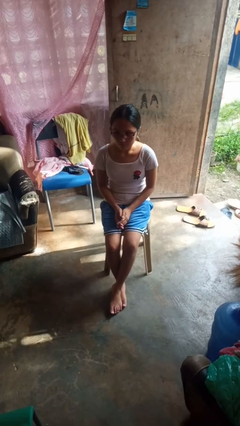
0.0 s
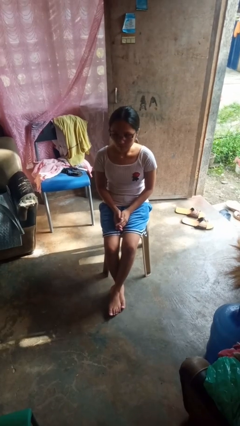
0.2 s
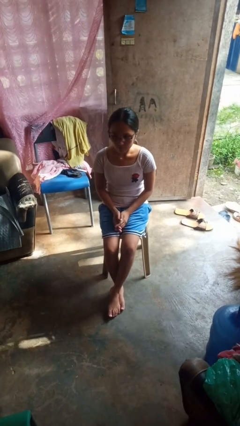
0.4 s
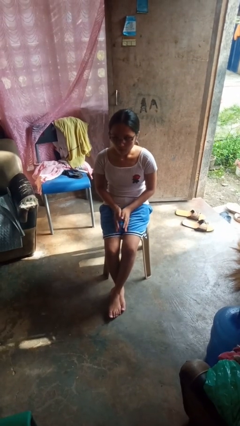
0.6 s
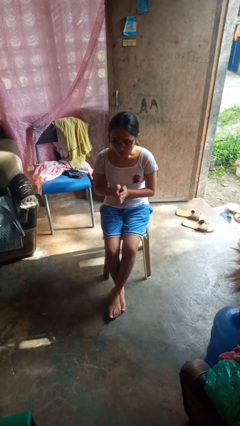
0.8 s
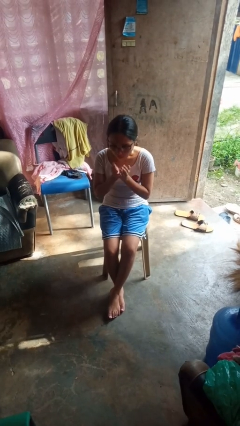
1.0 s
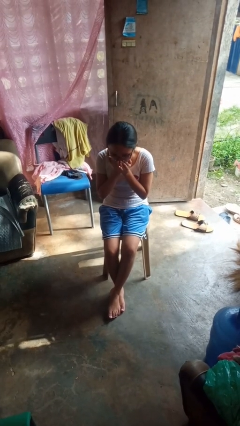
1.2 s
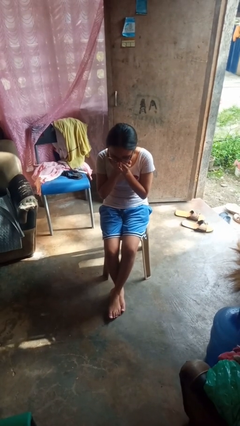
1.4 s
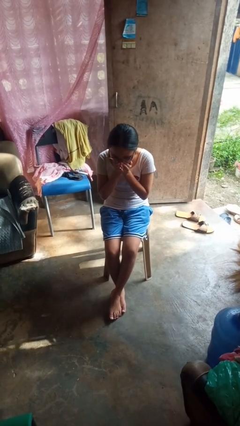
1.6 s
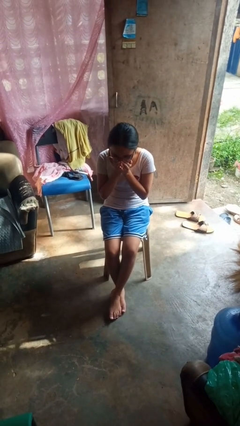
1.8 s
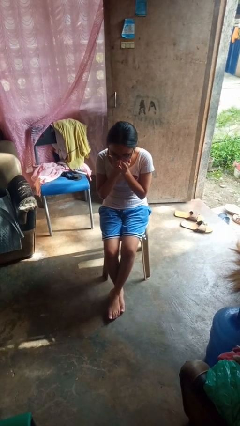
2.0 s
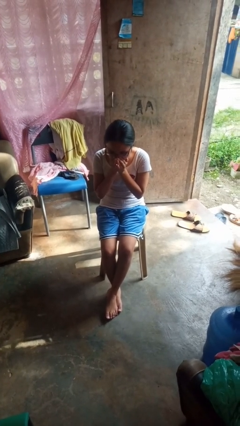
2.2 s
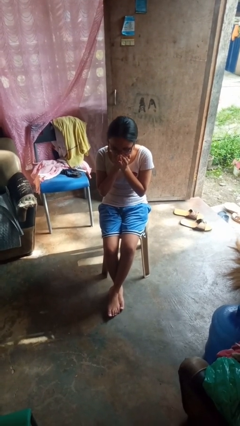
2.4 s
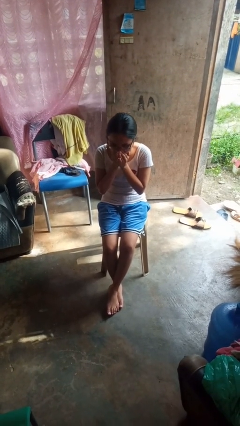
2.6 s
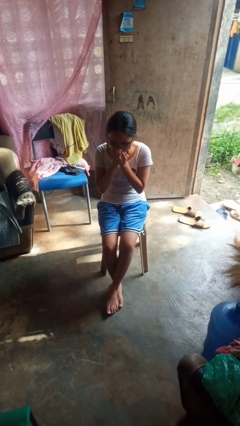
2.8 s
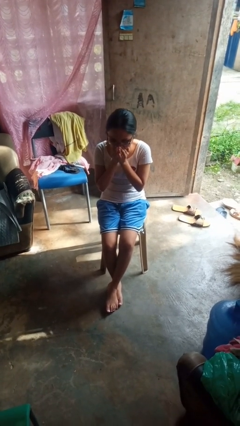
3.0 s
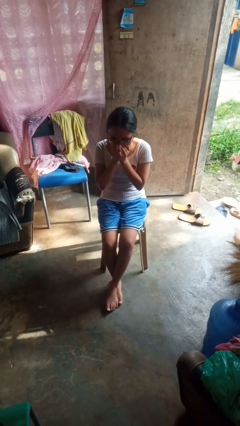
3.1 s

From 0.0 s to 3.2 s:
person sneezes into hand

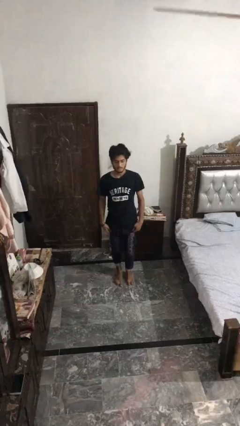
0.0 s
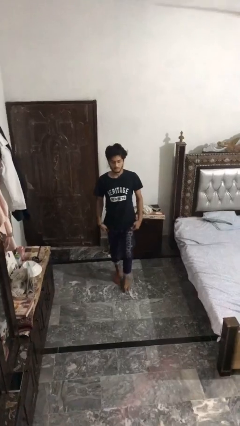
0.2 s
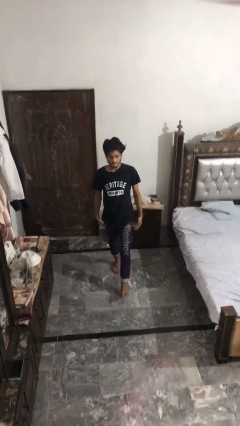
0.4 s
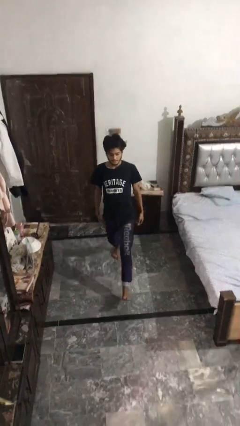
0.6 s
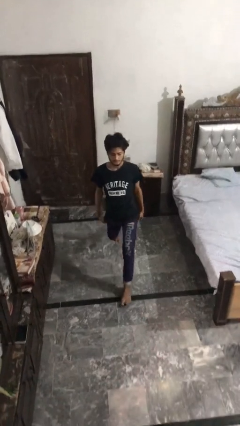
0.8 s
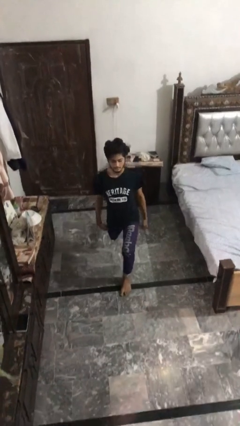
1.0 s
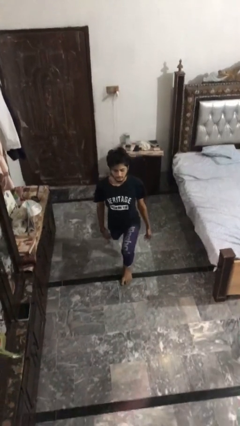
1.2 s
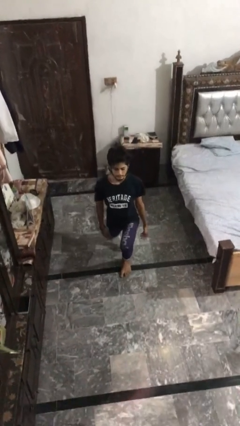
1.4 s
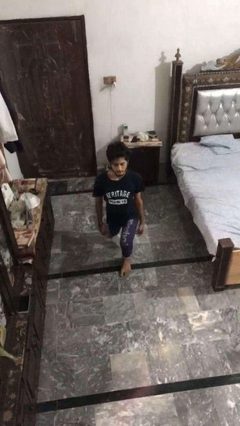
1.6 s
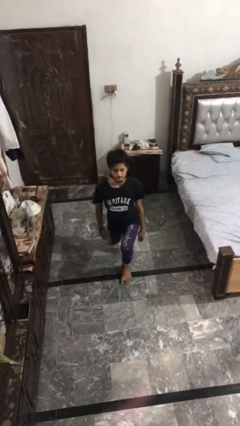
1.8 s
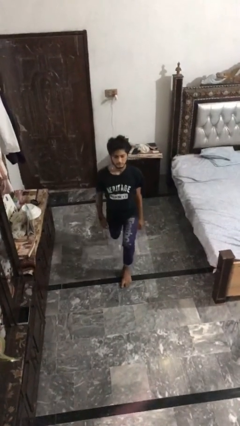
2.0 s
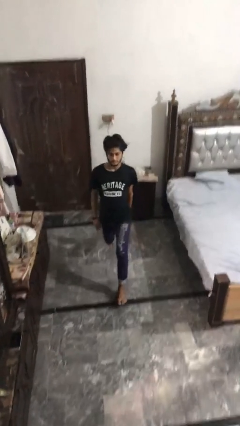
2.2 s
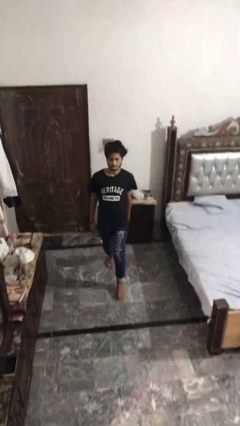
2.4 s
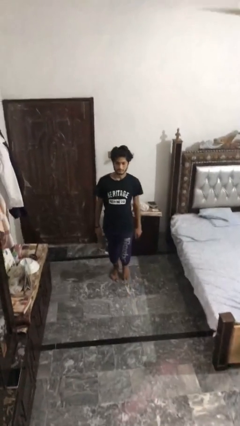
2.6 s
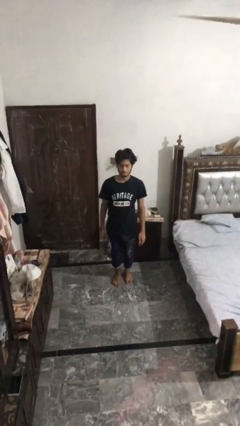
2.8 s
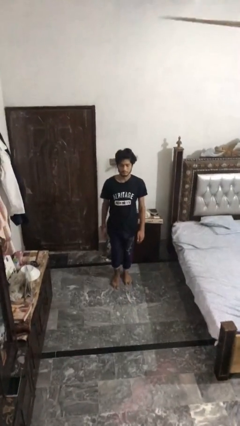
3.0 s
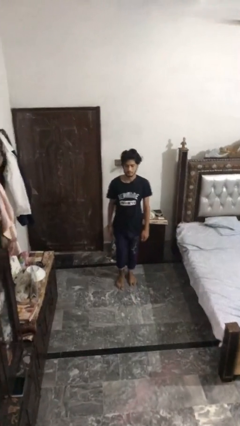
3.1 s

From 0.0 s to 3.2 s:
person exercises with lunges

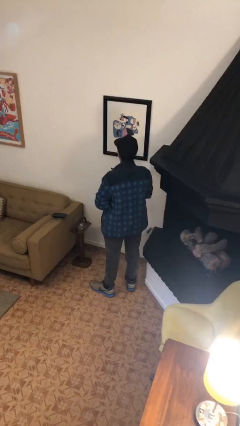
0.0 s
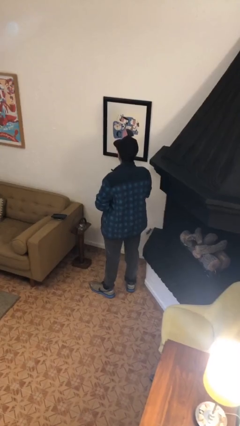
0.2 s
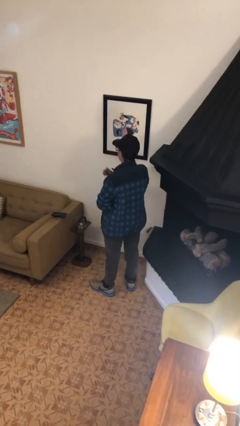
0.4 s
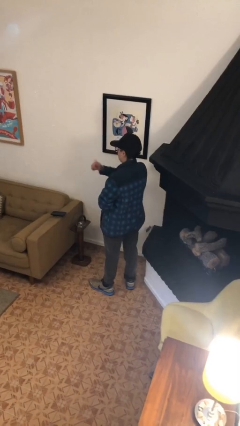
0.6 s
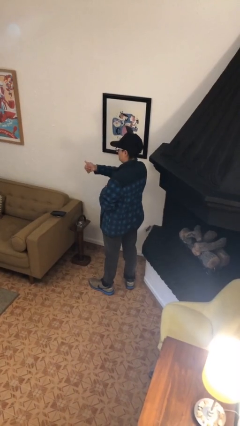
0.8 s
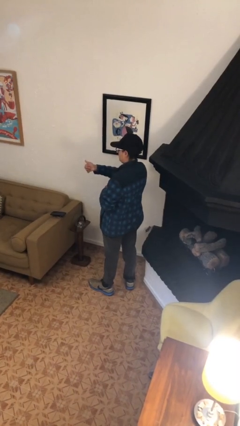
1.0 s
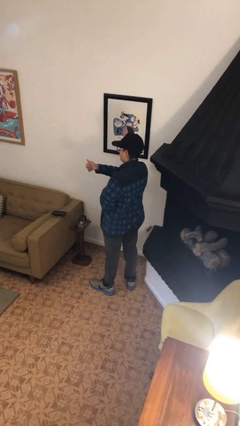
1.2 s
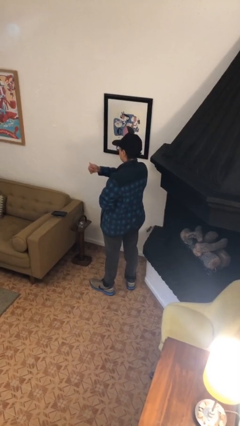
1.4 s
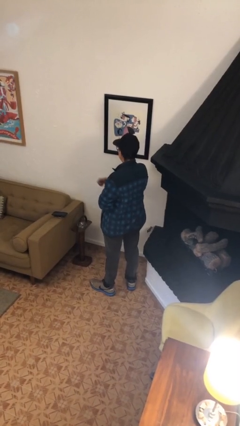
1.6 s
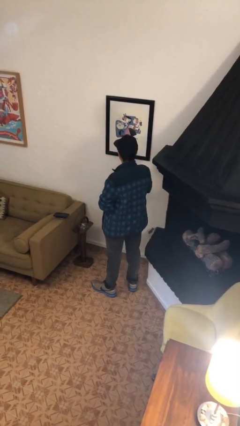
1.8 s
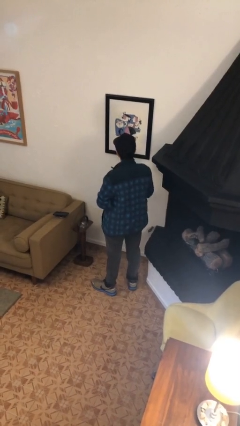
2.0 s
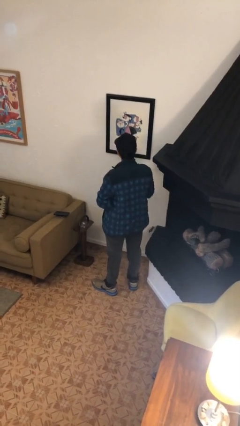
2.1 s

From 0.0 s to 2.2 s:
person gestures thumbs up

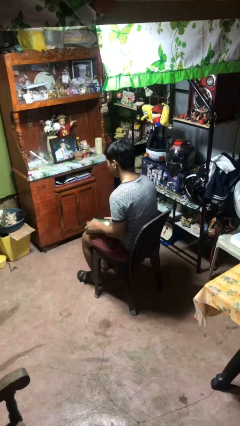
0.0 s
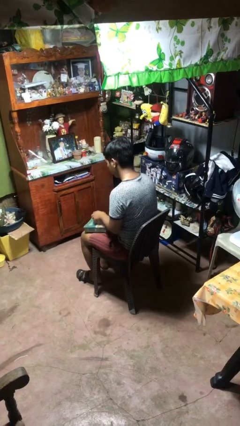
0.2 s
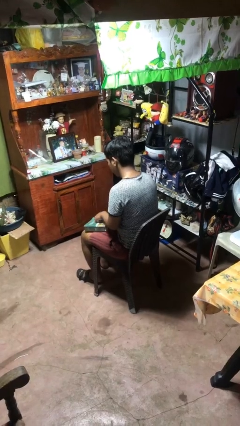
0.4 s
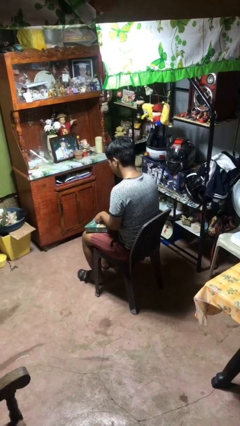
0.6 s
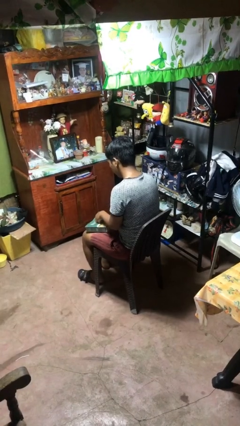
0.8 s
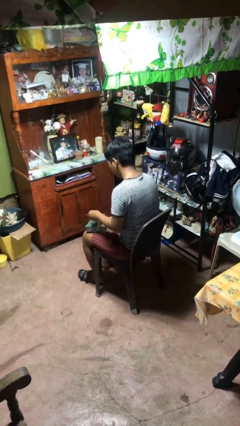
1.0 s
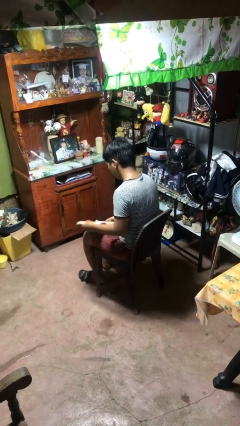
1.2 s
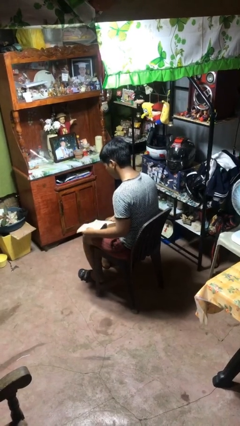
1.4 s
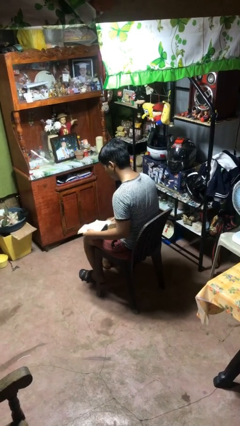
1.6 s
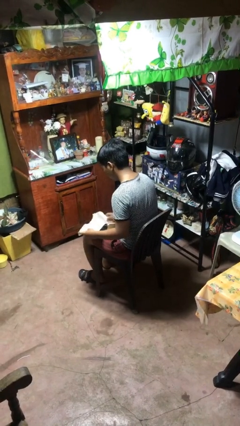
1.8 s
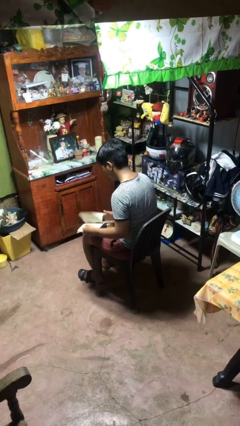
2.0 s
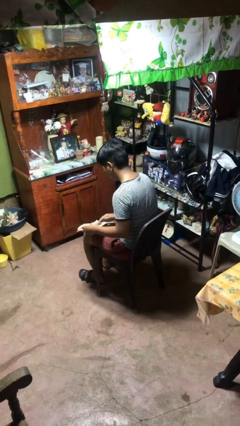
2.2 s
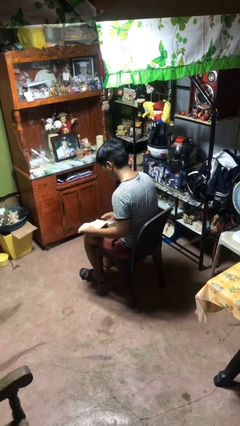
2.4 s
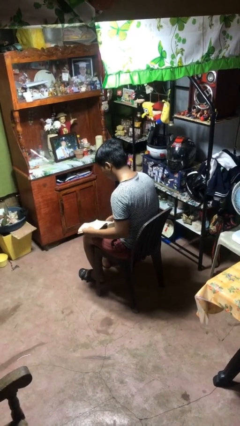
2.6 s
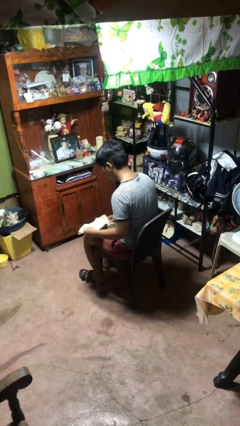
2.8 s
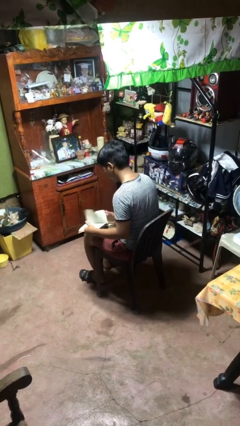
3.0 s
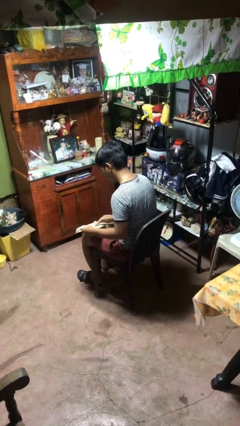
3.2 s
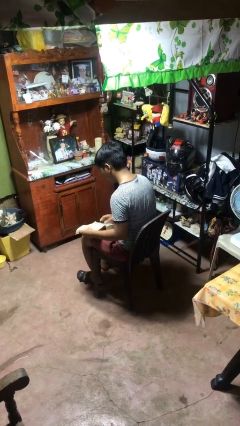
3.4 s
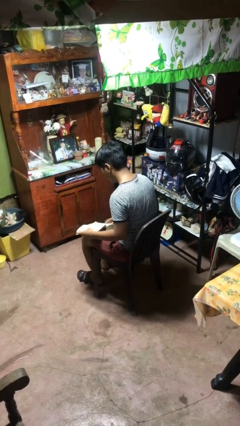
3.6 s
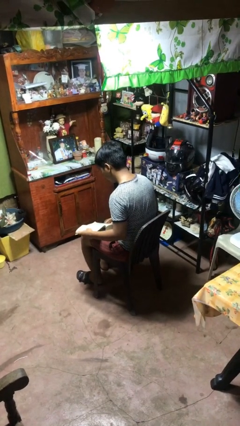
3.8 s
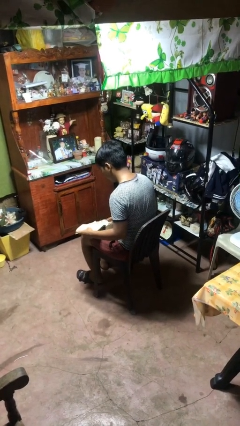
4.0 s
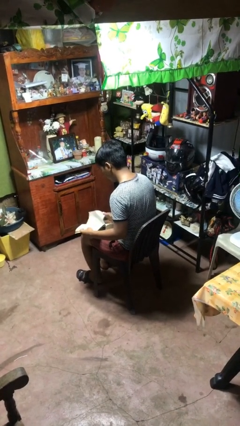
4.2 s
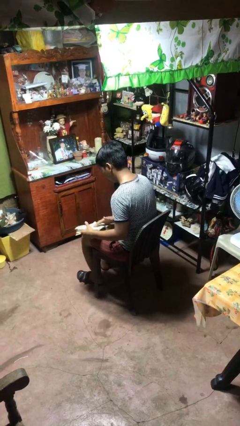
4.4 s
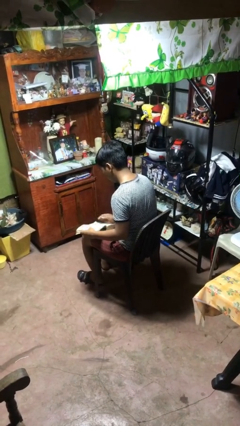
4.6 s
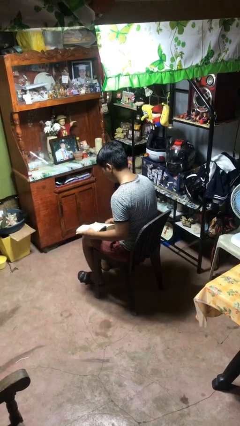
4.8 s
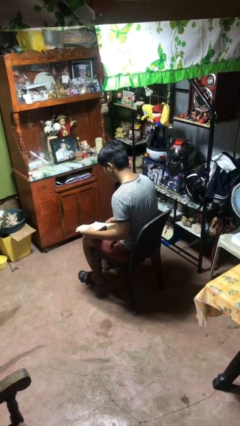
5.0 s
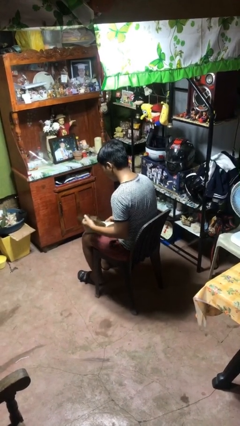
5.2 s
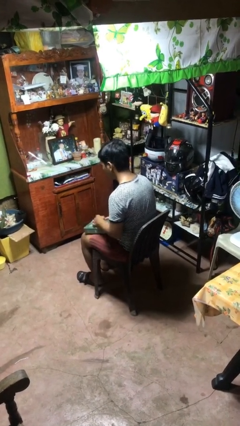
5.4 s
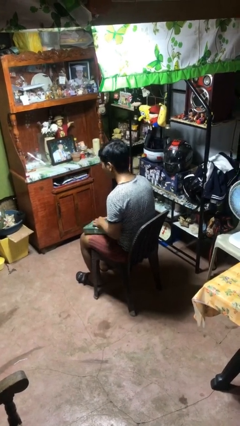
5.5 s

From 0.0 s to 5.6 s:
person reads book

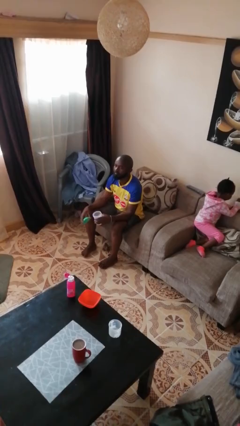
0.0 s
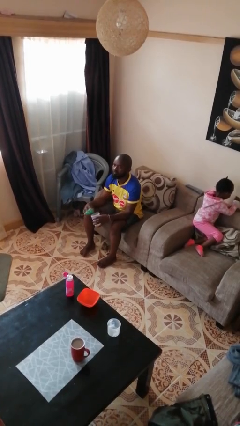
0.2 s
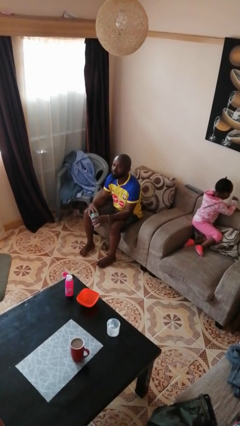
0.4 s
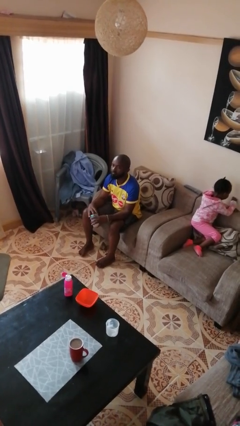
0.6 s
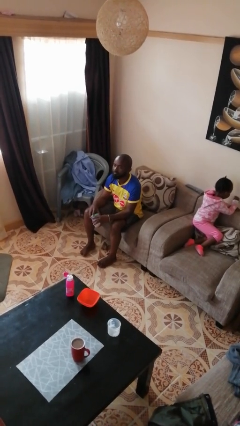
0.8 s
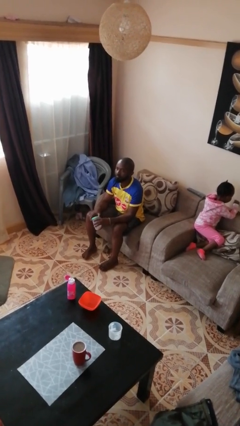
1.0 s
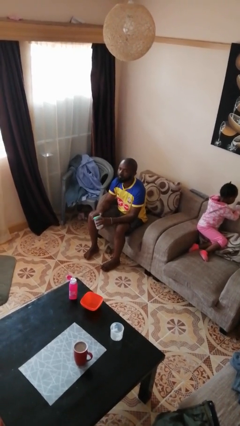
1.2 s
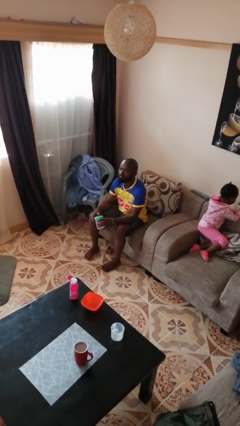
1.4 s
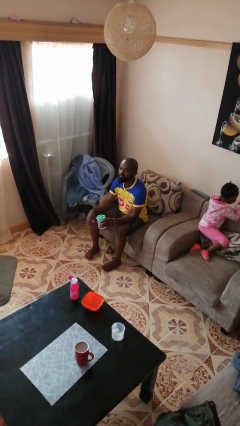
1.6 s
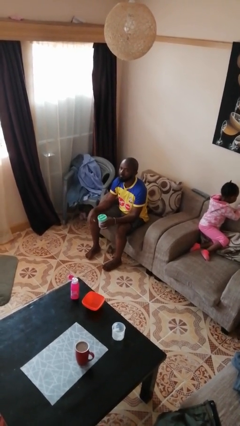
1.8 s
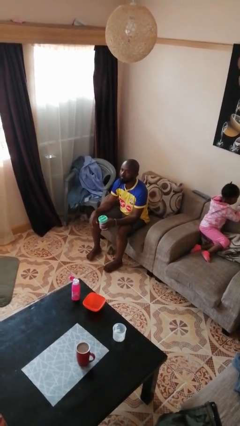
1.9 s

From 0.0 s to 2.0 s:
person closes jar

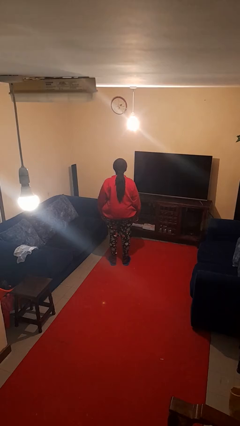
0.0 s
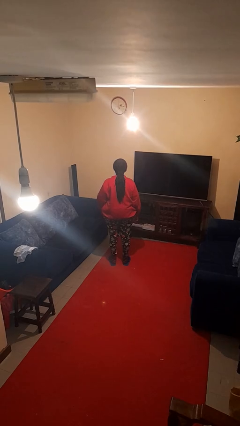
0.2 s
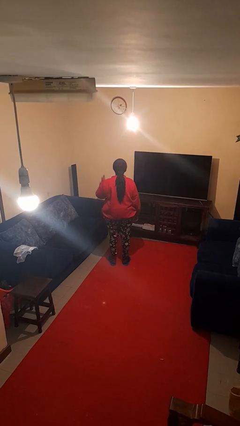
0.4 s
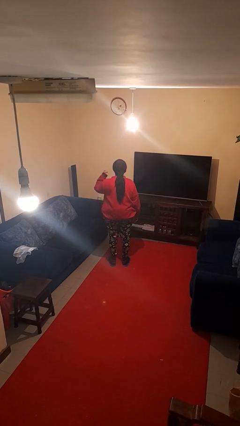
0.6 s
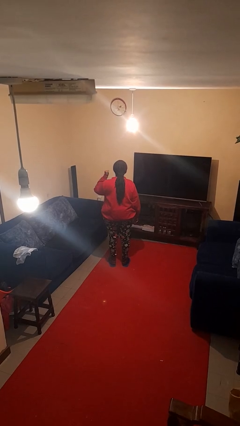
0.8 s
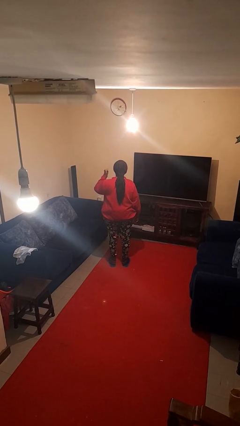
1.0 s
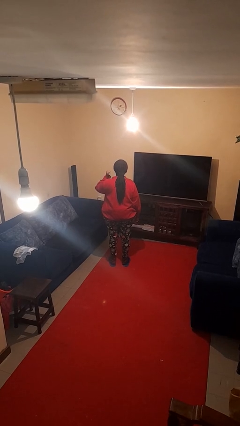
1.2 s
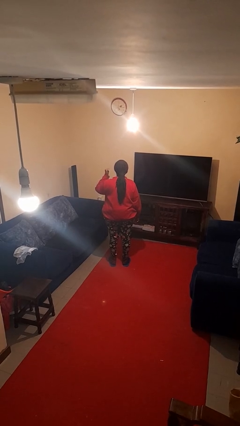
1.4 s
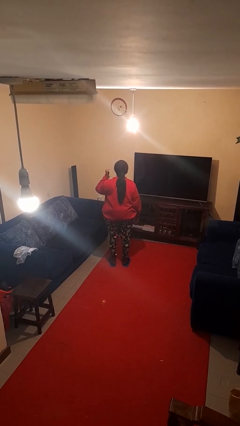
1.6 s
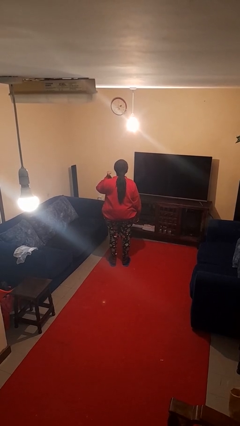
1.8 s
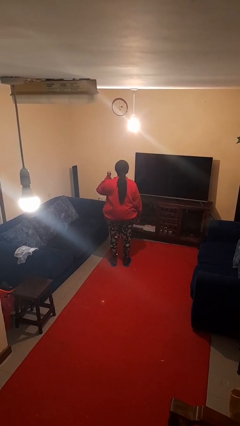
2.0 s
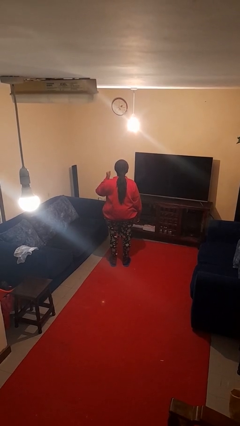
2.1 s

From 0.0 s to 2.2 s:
person gestures behind me
